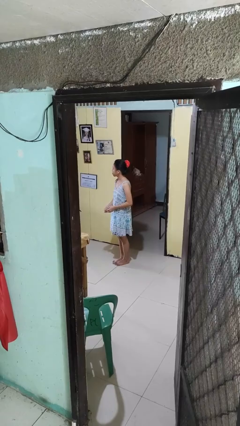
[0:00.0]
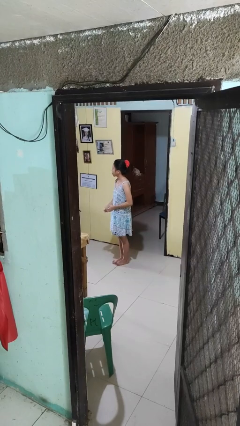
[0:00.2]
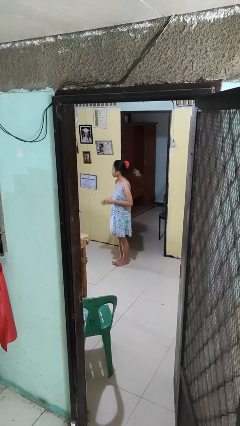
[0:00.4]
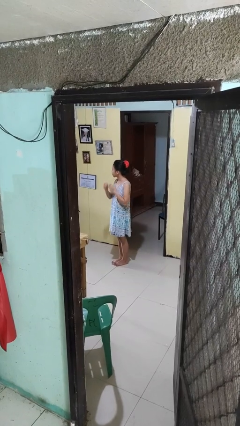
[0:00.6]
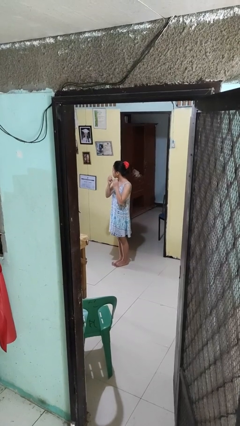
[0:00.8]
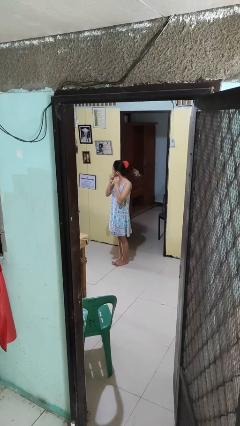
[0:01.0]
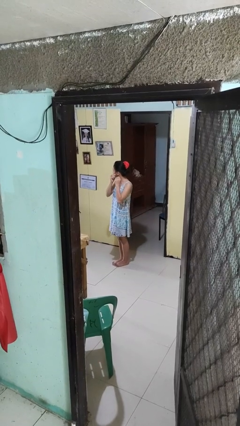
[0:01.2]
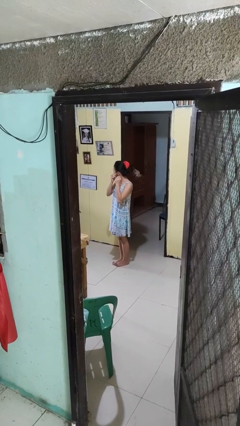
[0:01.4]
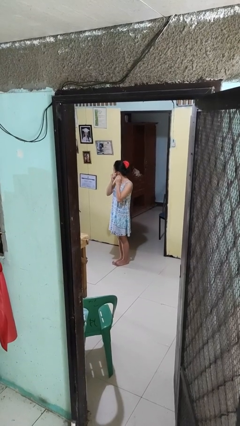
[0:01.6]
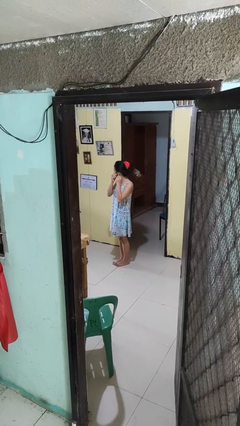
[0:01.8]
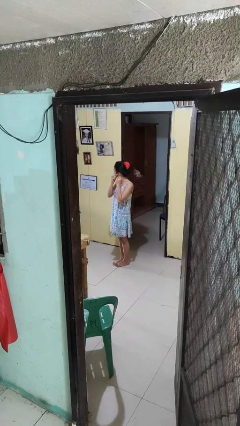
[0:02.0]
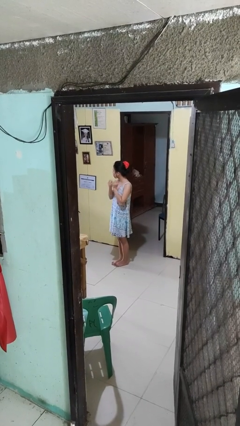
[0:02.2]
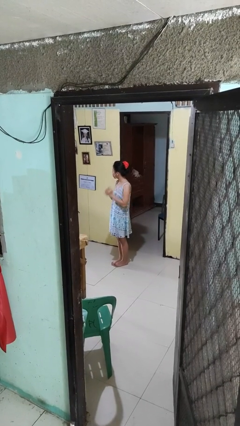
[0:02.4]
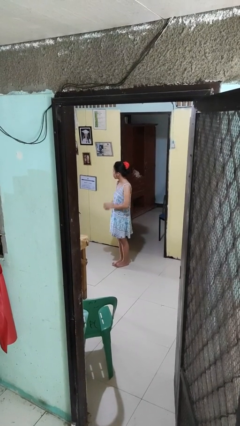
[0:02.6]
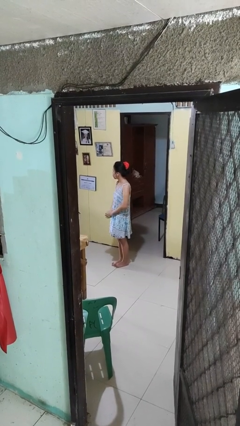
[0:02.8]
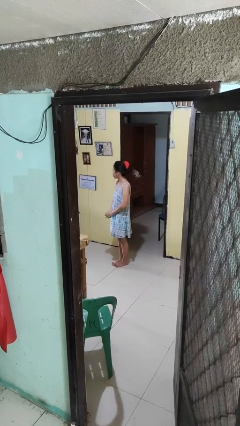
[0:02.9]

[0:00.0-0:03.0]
person puts on earrings

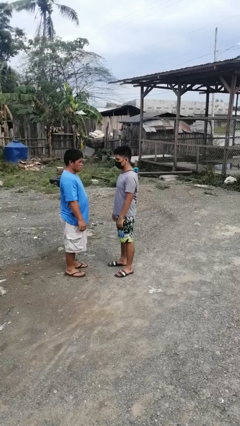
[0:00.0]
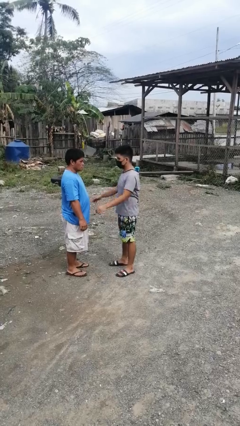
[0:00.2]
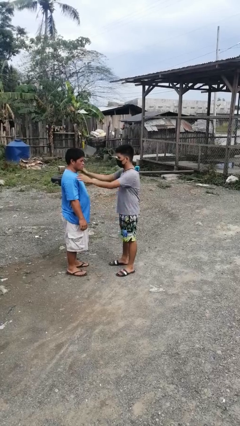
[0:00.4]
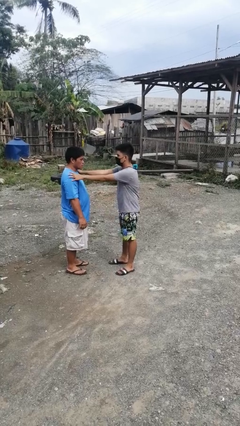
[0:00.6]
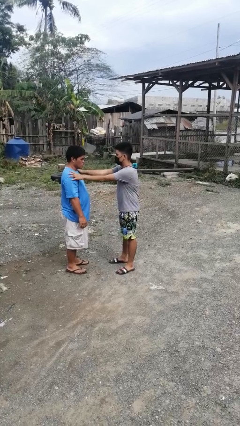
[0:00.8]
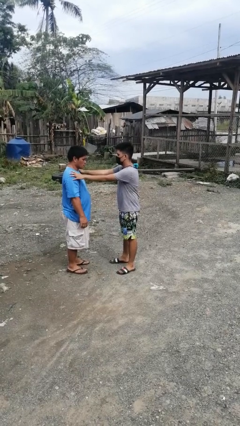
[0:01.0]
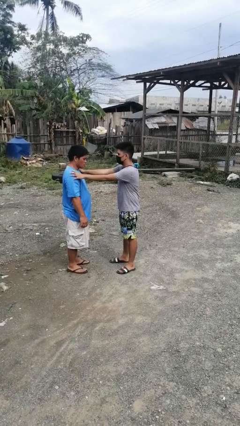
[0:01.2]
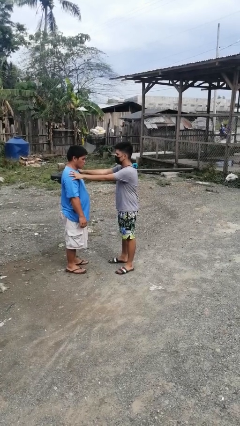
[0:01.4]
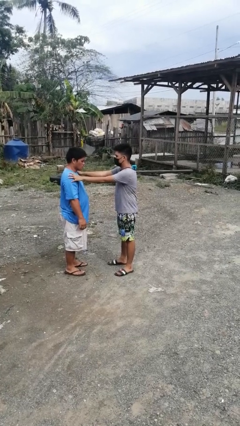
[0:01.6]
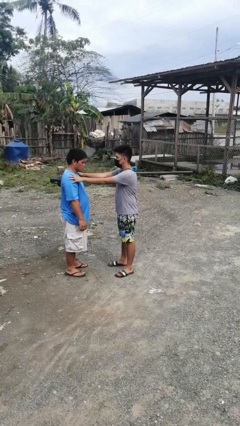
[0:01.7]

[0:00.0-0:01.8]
person grabs person by shoulder

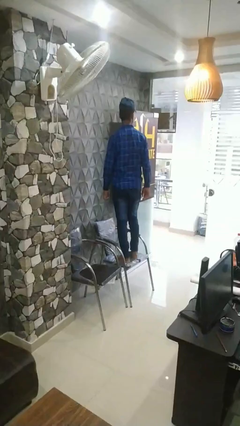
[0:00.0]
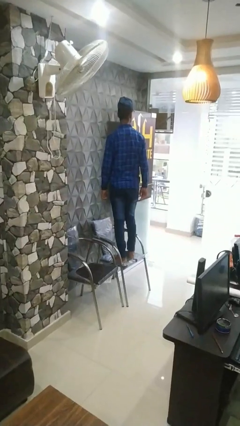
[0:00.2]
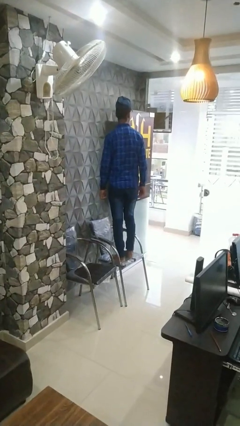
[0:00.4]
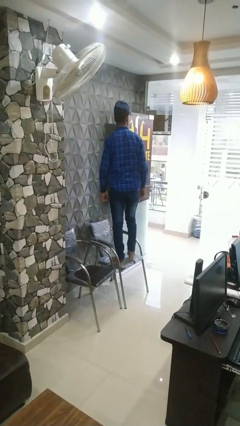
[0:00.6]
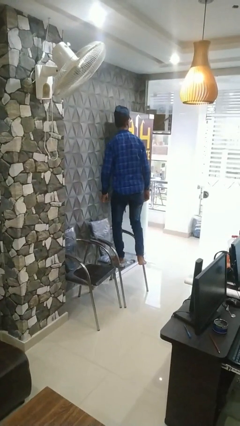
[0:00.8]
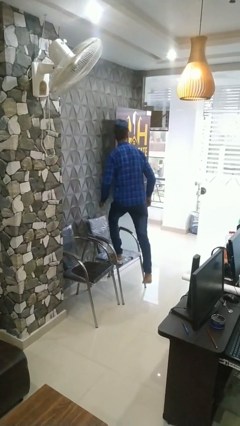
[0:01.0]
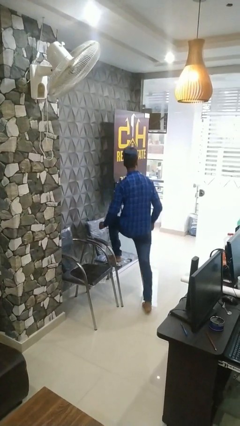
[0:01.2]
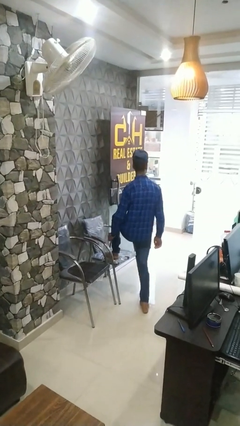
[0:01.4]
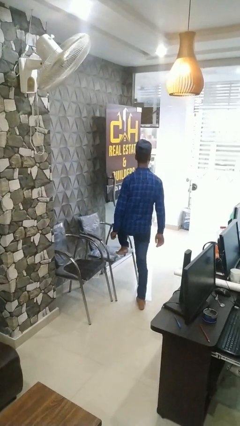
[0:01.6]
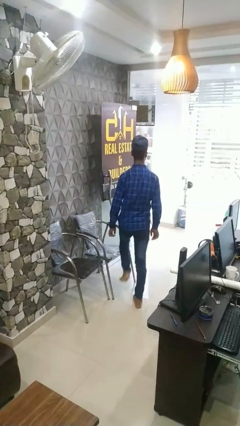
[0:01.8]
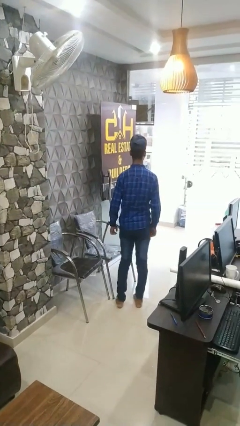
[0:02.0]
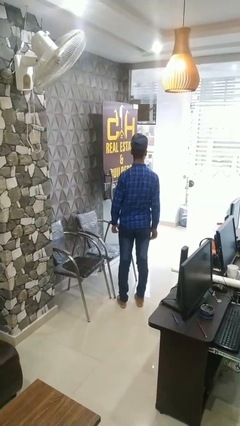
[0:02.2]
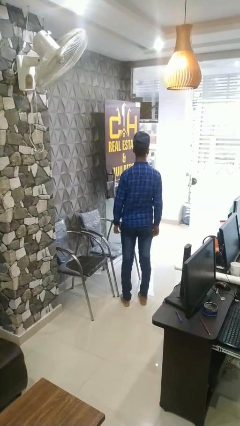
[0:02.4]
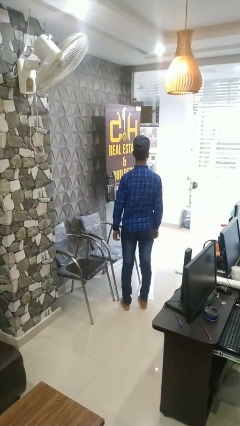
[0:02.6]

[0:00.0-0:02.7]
person climbs off chair

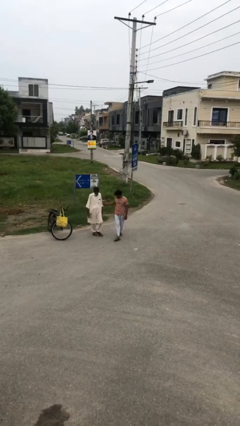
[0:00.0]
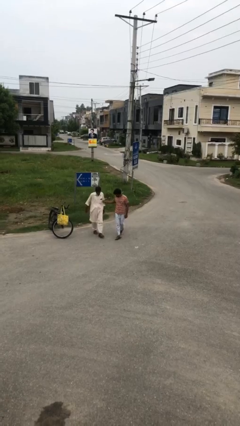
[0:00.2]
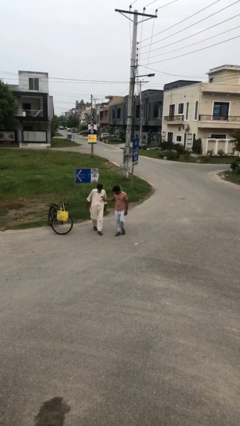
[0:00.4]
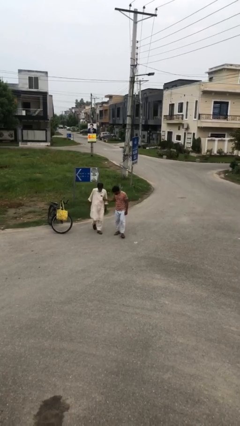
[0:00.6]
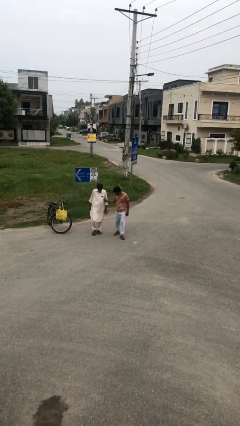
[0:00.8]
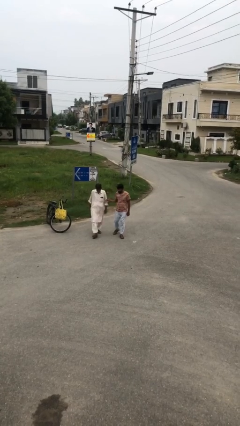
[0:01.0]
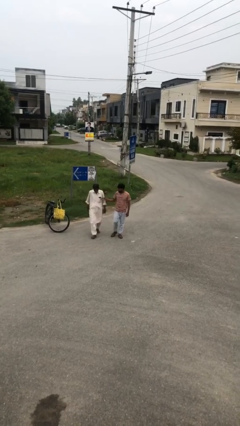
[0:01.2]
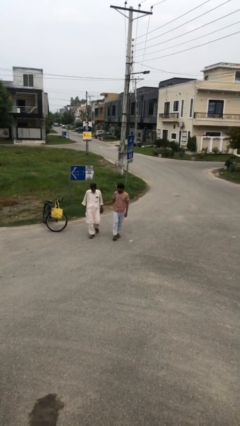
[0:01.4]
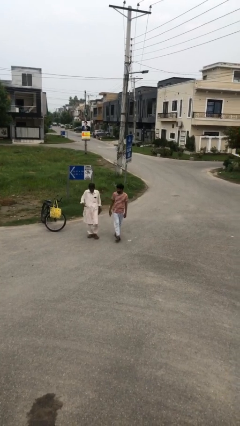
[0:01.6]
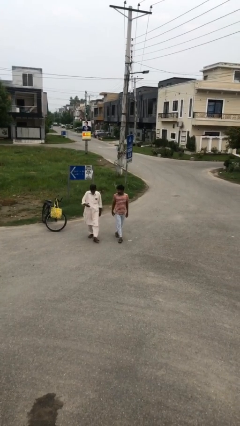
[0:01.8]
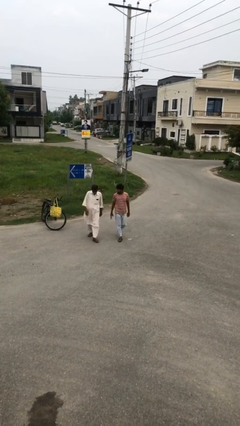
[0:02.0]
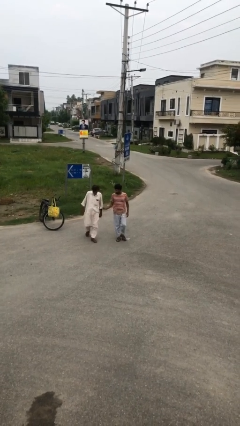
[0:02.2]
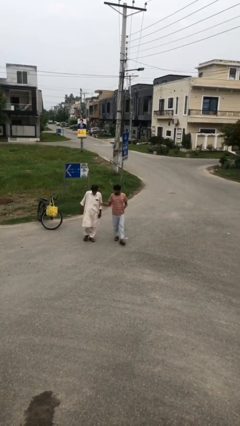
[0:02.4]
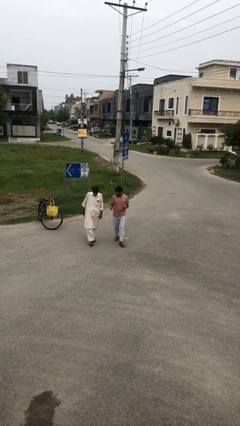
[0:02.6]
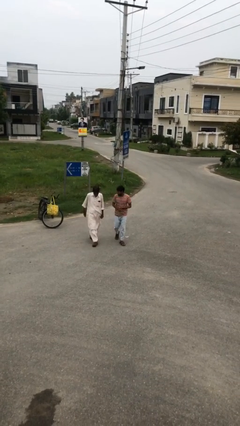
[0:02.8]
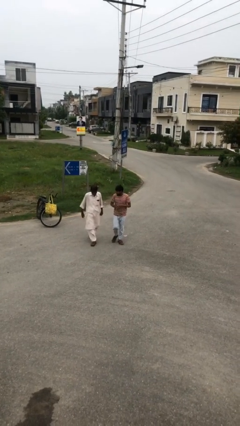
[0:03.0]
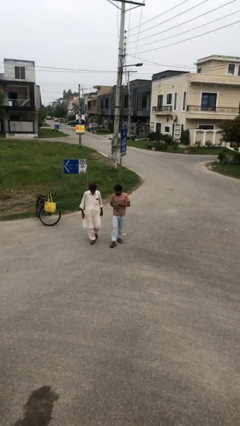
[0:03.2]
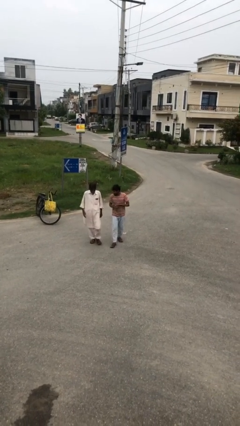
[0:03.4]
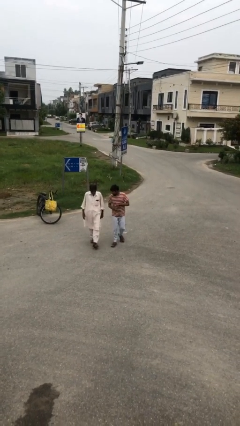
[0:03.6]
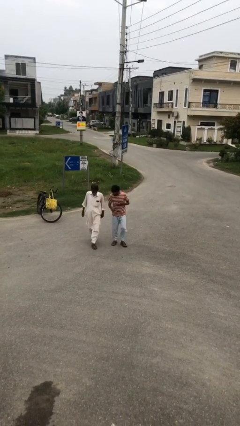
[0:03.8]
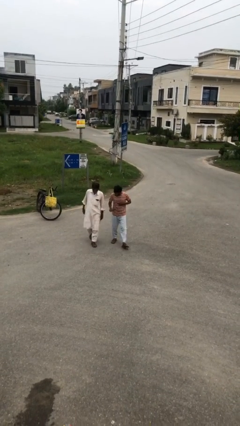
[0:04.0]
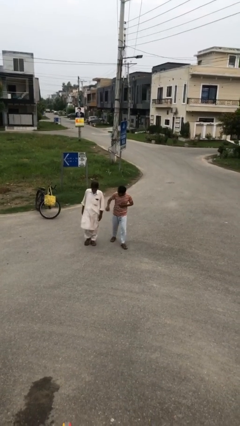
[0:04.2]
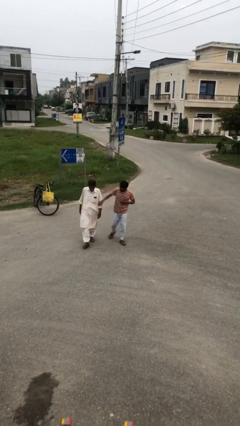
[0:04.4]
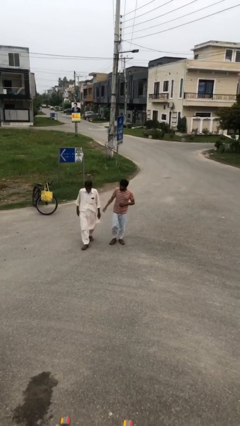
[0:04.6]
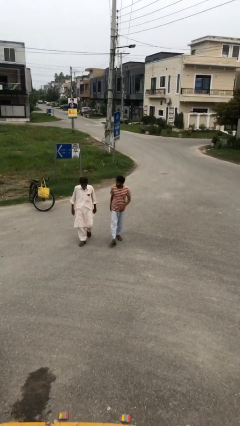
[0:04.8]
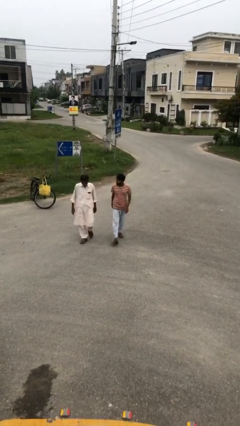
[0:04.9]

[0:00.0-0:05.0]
person talks to person

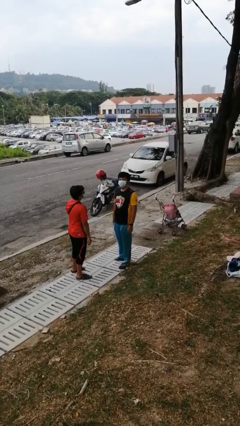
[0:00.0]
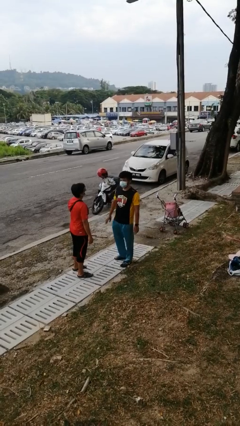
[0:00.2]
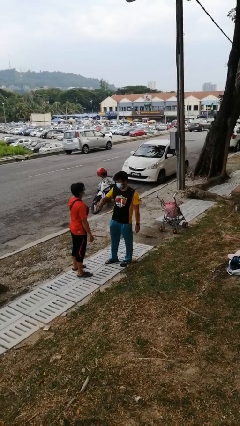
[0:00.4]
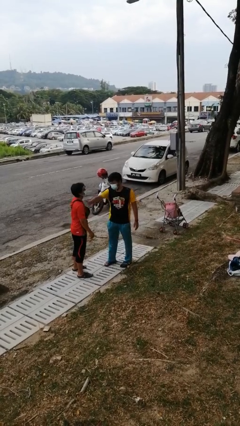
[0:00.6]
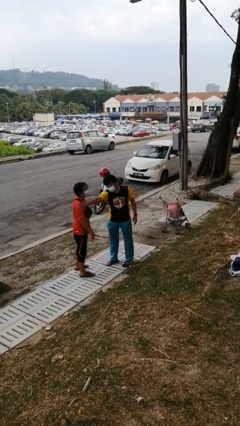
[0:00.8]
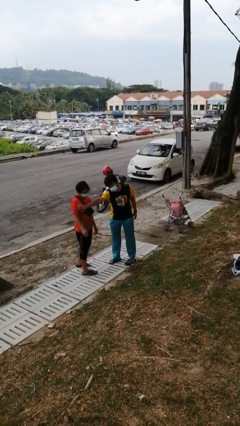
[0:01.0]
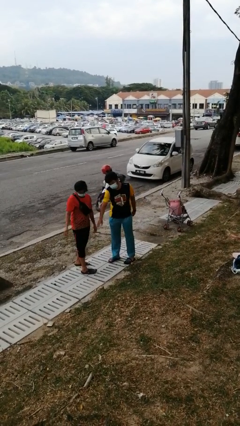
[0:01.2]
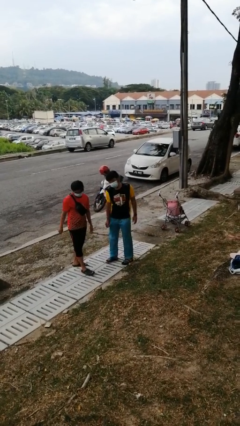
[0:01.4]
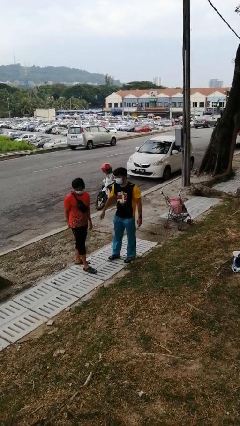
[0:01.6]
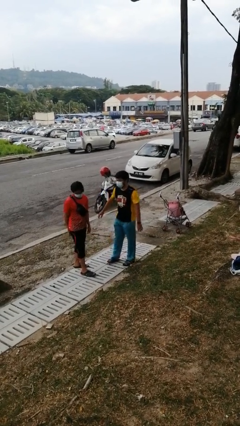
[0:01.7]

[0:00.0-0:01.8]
person shoves person

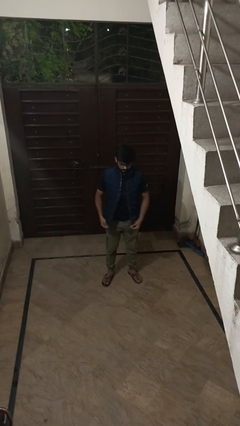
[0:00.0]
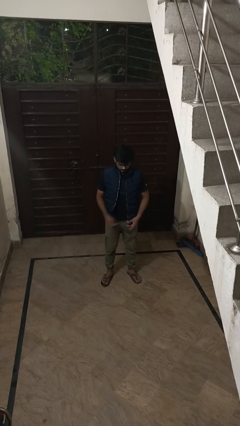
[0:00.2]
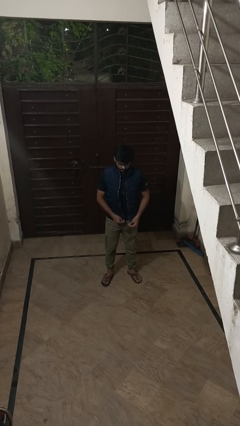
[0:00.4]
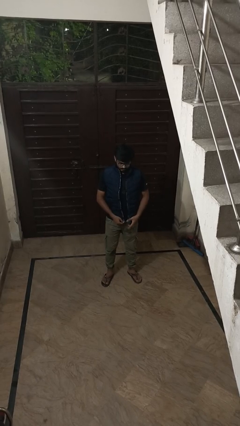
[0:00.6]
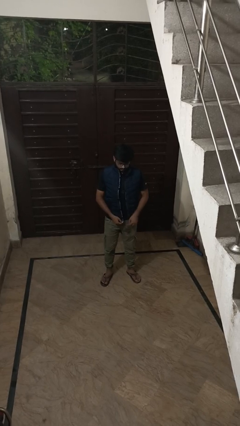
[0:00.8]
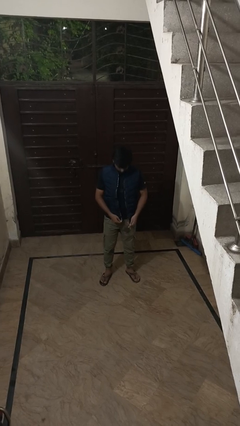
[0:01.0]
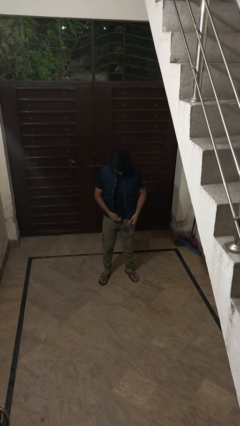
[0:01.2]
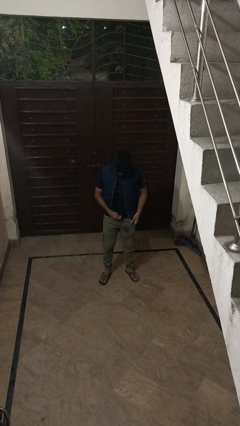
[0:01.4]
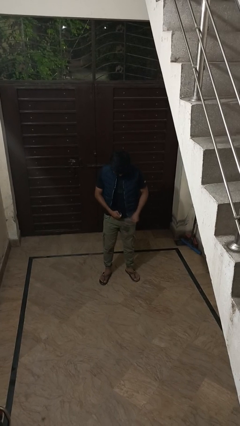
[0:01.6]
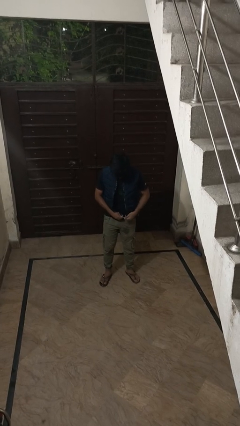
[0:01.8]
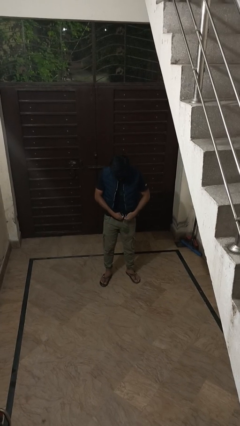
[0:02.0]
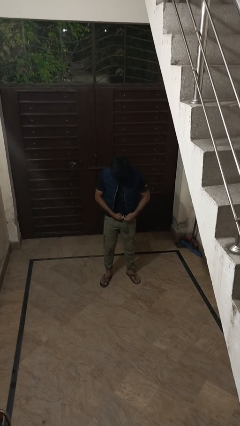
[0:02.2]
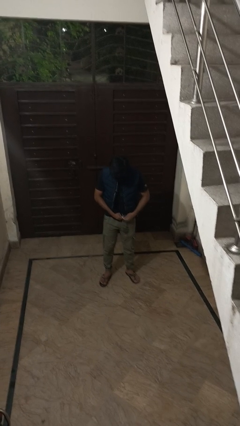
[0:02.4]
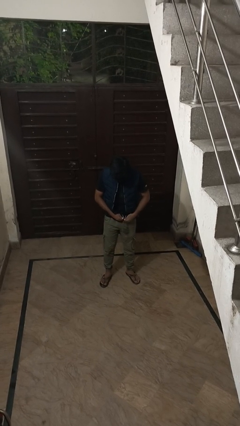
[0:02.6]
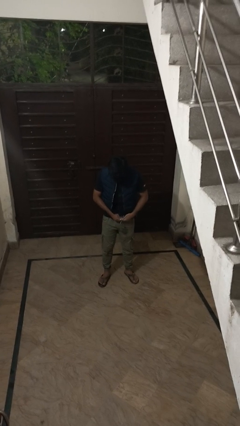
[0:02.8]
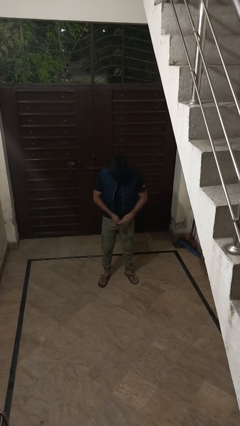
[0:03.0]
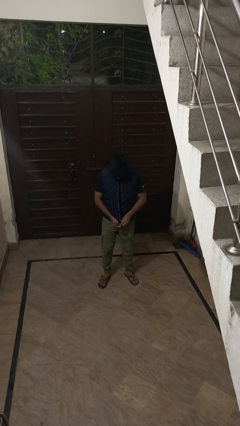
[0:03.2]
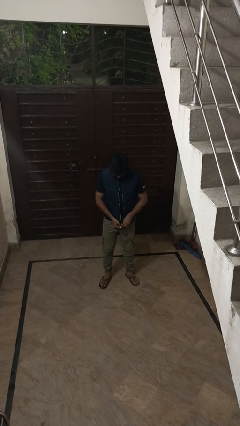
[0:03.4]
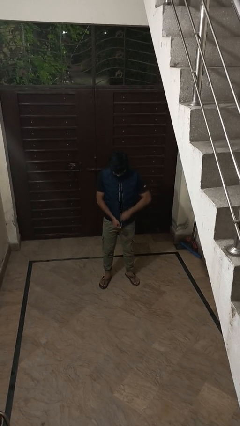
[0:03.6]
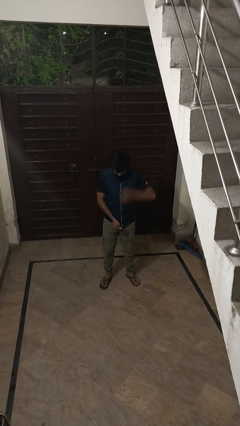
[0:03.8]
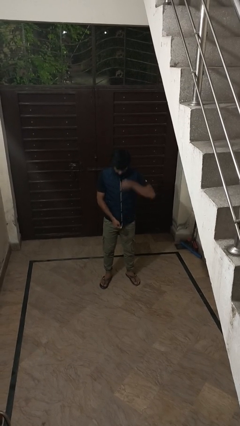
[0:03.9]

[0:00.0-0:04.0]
person zips up jacket
